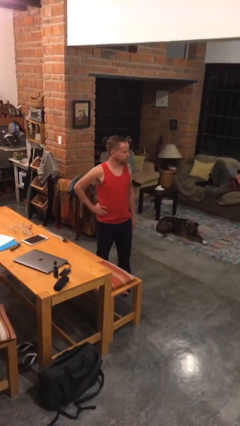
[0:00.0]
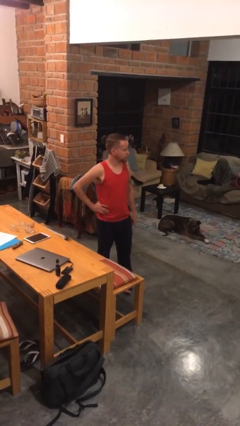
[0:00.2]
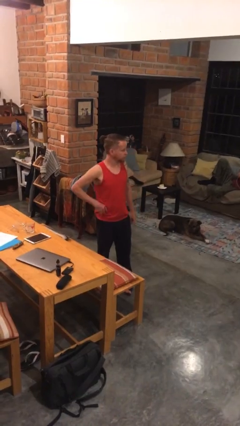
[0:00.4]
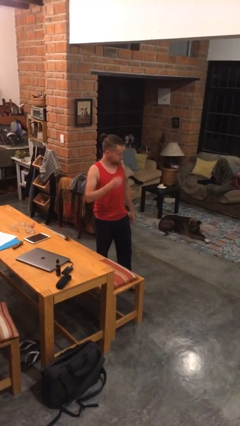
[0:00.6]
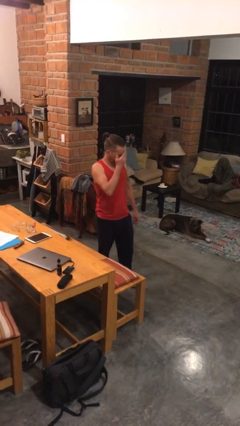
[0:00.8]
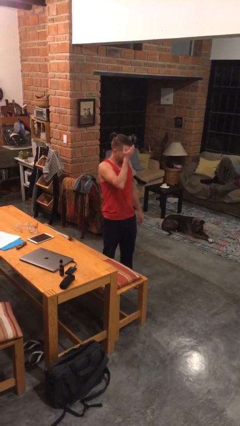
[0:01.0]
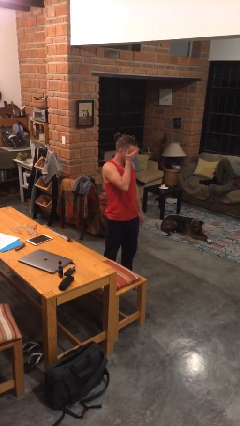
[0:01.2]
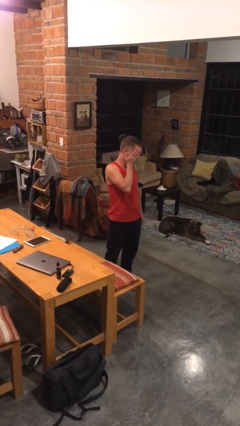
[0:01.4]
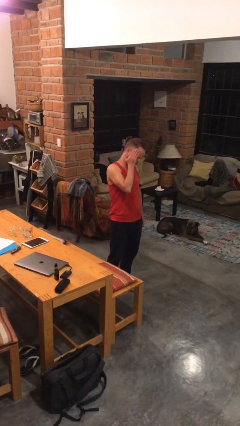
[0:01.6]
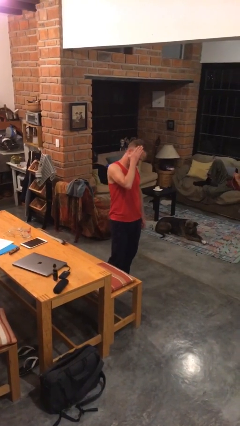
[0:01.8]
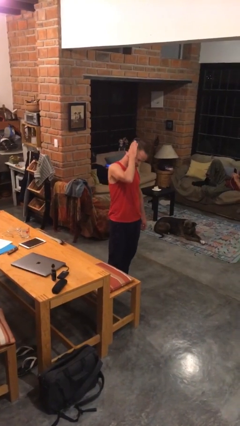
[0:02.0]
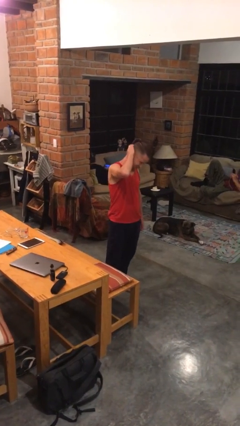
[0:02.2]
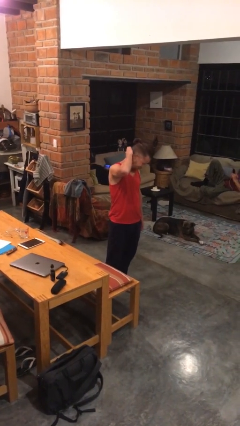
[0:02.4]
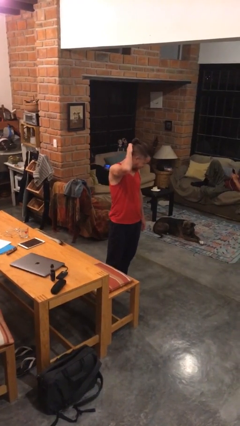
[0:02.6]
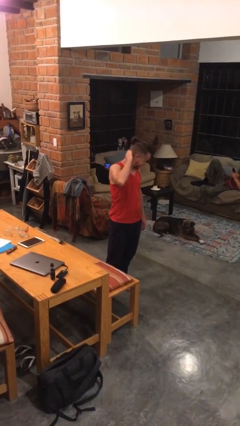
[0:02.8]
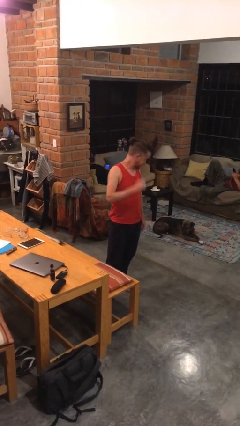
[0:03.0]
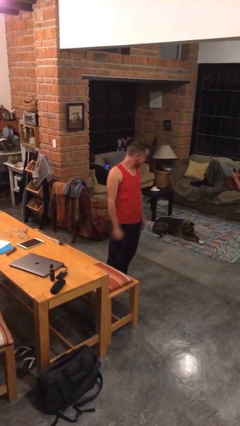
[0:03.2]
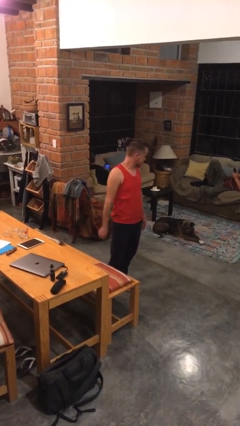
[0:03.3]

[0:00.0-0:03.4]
person scratches face

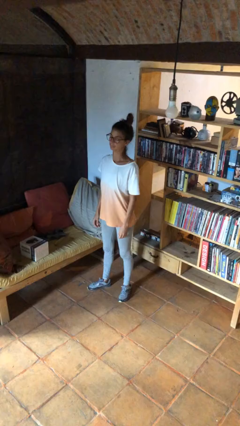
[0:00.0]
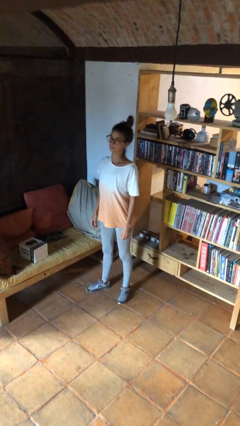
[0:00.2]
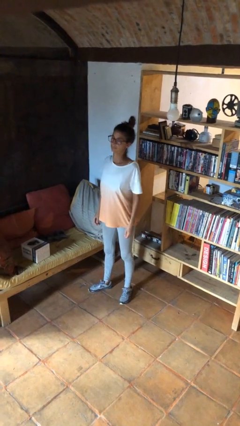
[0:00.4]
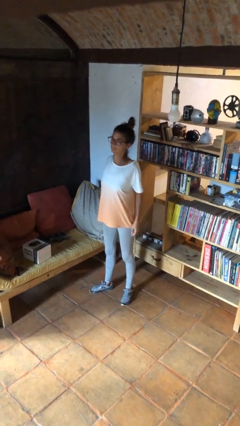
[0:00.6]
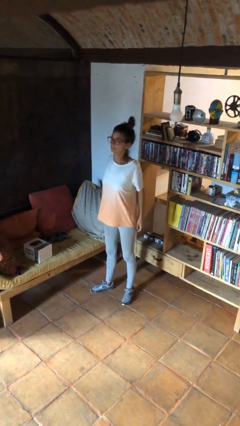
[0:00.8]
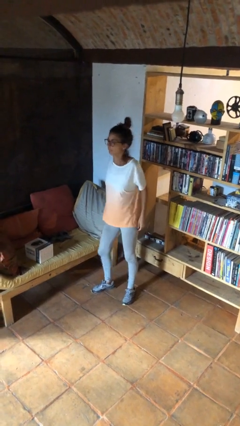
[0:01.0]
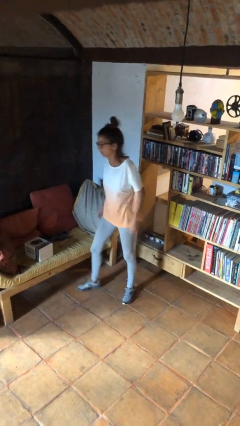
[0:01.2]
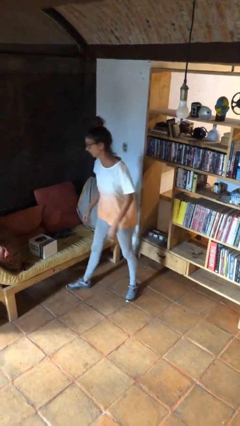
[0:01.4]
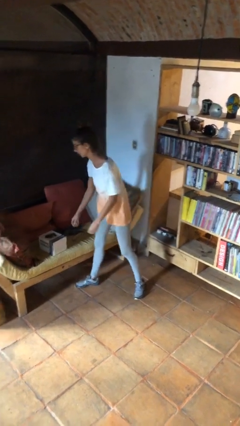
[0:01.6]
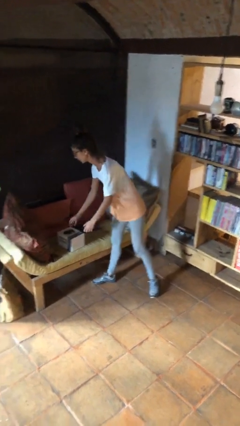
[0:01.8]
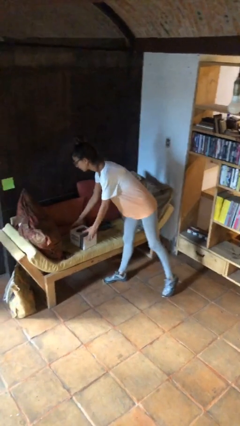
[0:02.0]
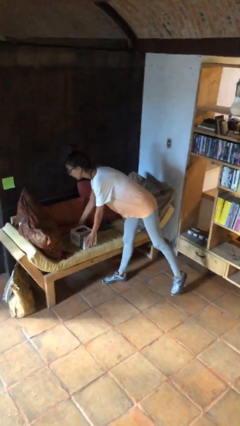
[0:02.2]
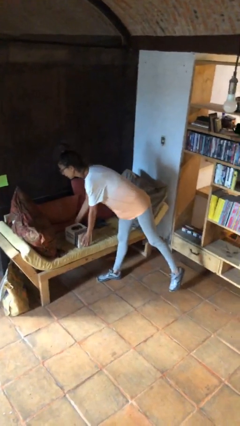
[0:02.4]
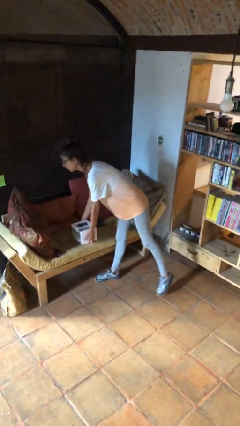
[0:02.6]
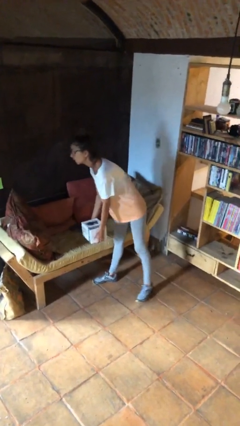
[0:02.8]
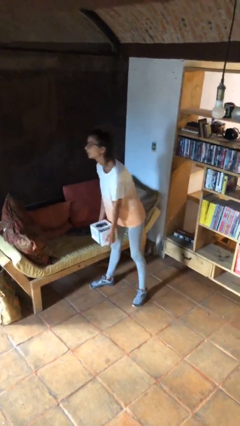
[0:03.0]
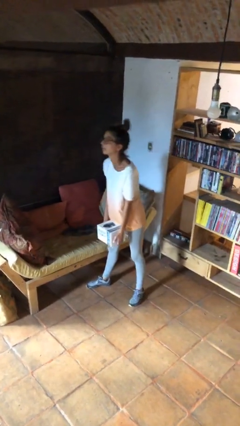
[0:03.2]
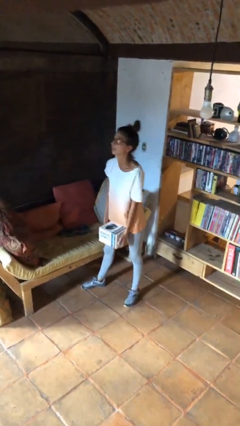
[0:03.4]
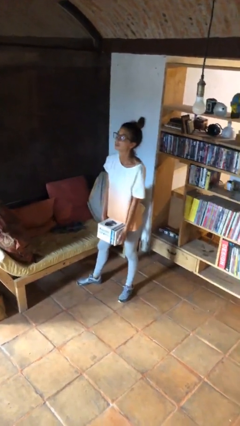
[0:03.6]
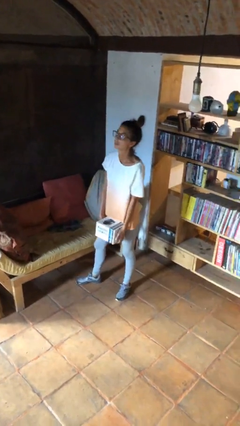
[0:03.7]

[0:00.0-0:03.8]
person picks up object from couch

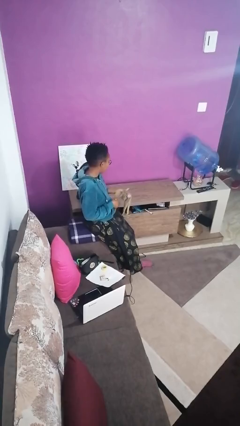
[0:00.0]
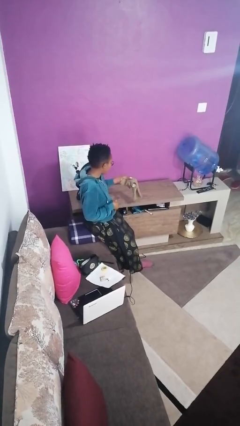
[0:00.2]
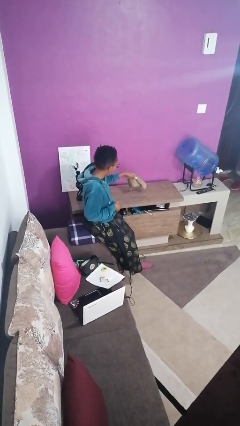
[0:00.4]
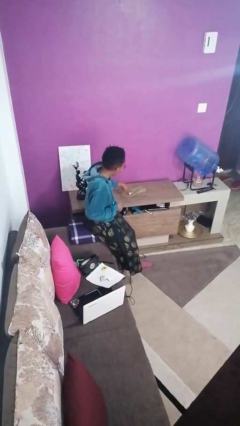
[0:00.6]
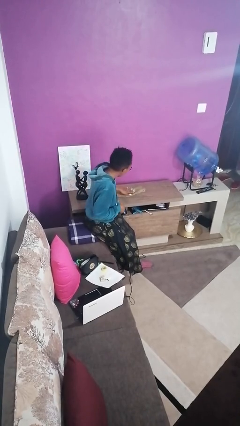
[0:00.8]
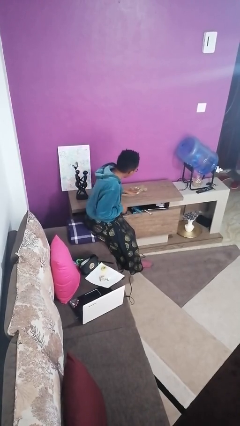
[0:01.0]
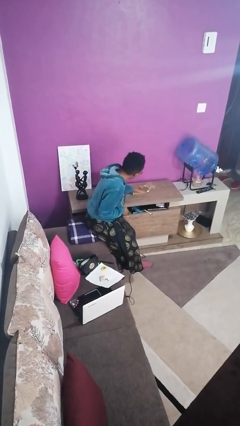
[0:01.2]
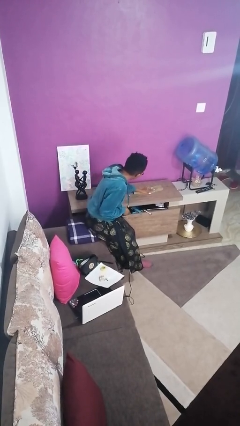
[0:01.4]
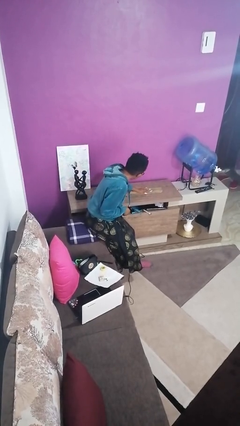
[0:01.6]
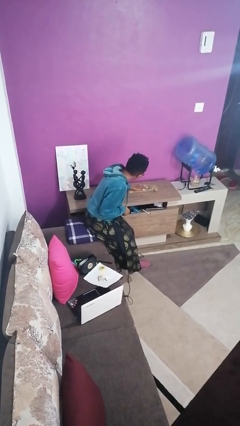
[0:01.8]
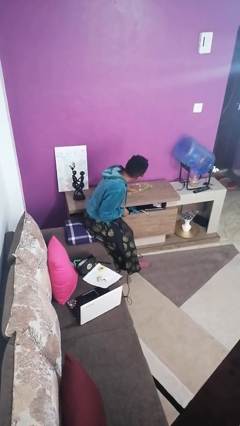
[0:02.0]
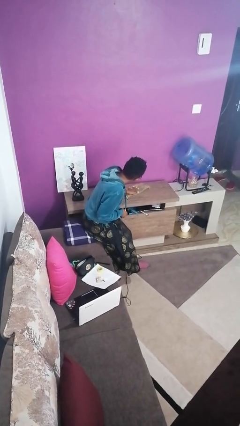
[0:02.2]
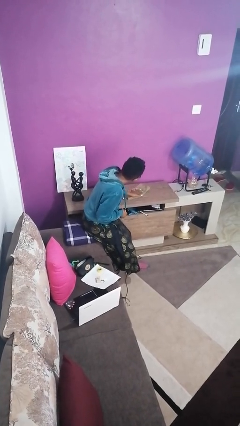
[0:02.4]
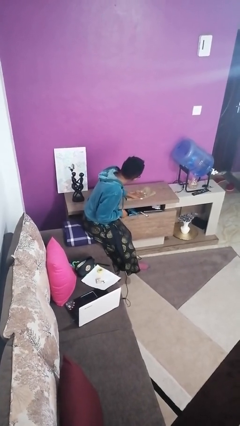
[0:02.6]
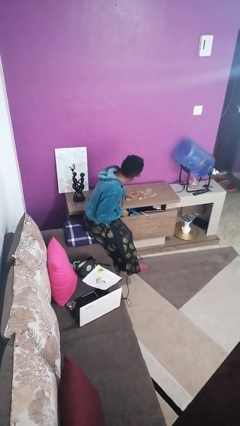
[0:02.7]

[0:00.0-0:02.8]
person cleans table with rag

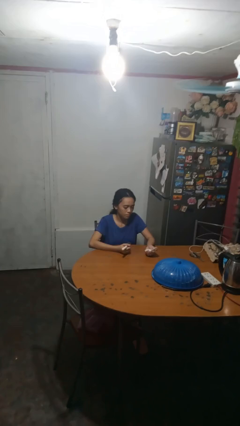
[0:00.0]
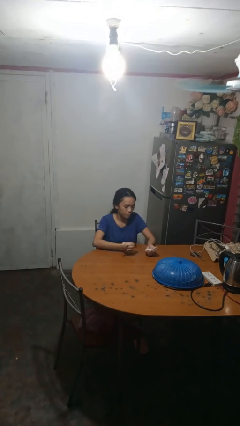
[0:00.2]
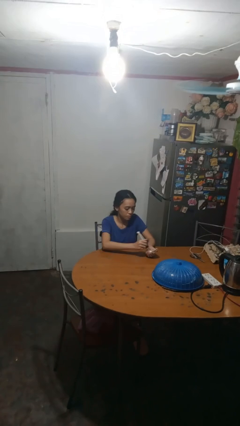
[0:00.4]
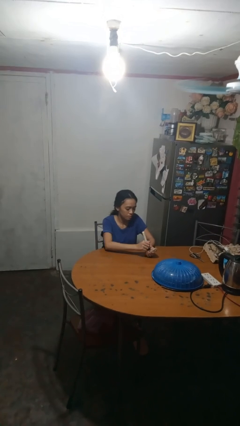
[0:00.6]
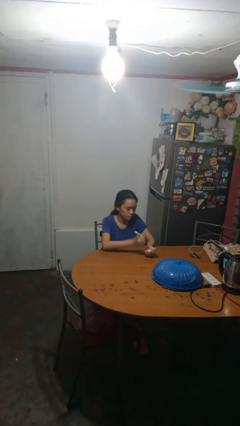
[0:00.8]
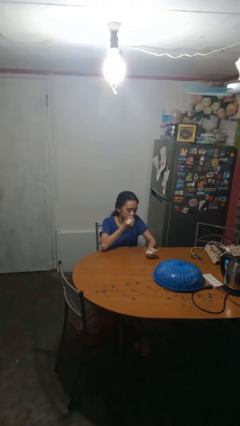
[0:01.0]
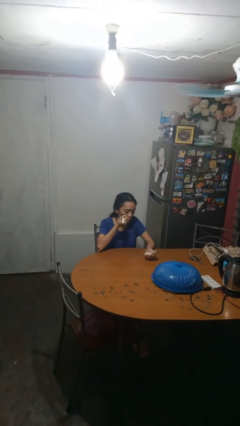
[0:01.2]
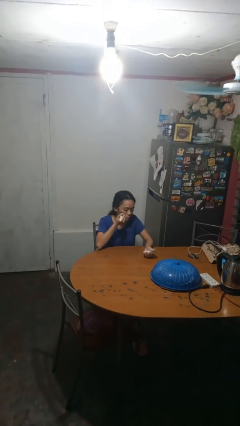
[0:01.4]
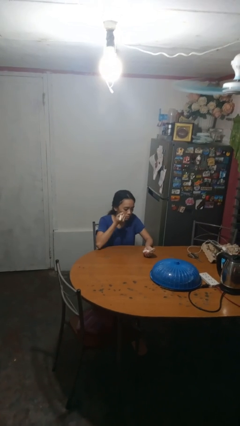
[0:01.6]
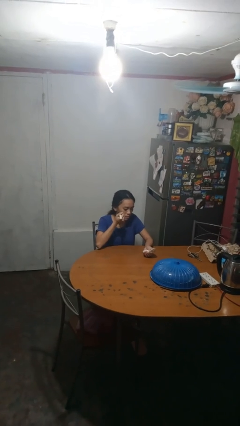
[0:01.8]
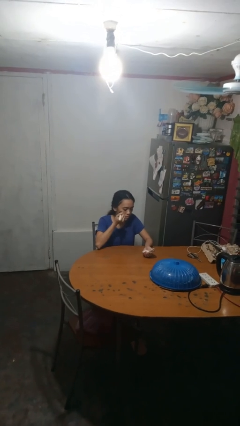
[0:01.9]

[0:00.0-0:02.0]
person applies foundation makeup

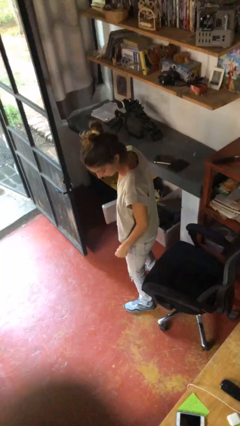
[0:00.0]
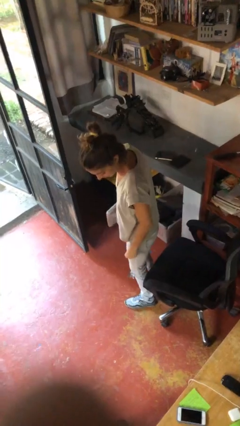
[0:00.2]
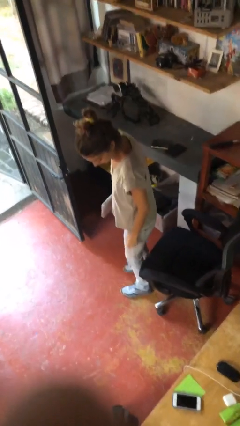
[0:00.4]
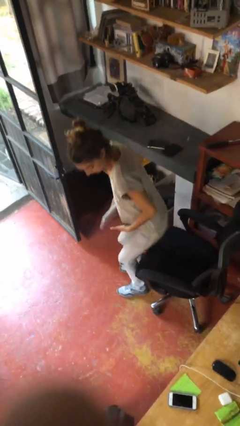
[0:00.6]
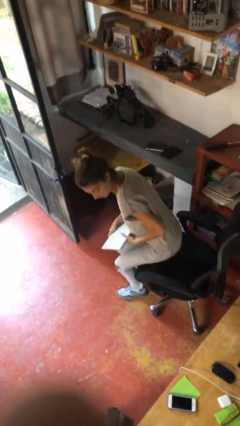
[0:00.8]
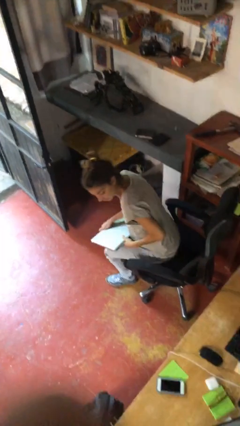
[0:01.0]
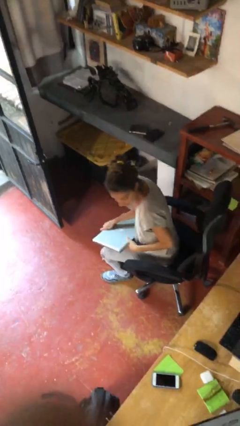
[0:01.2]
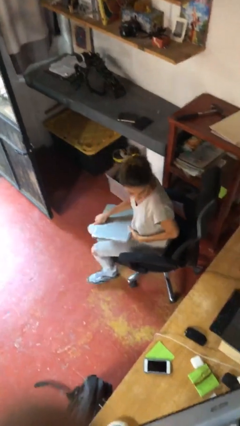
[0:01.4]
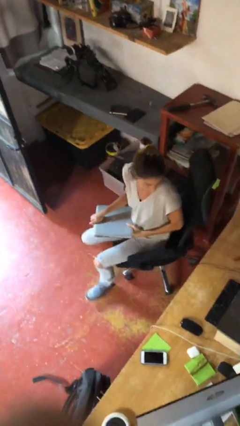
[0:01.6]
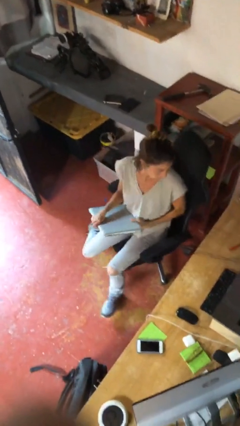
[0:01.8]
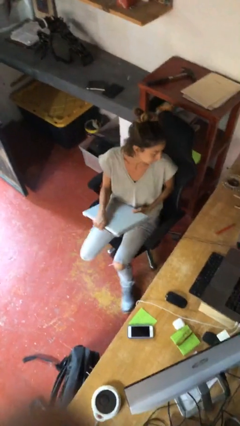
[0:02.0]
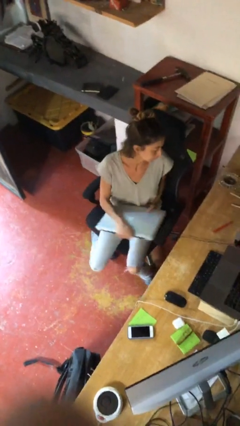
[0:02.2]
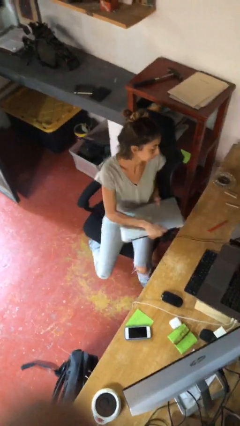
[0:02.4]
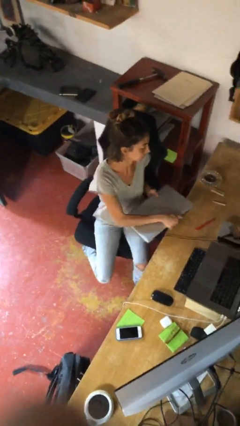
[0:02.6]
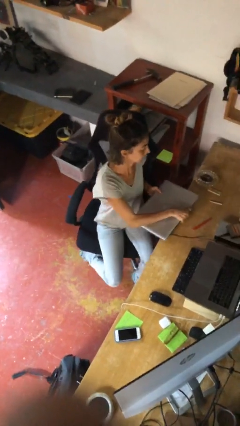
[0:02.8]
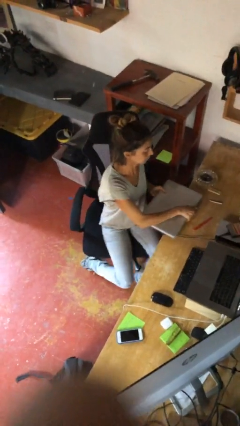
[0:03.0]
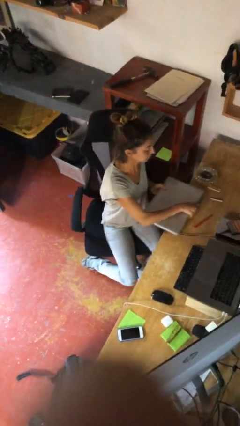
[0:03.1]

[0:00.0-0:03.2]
person sits down

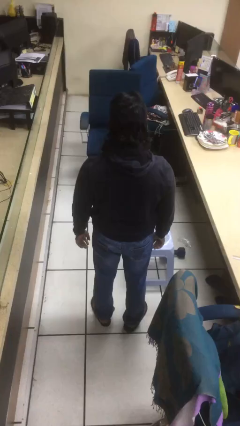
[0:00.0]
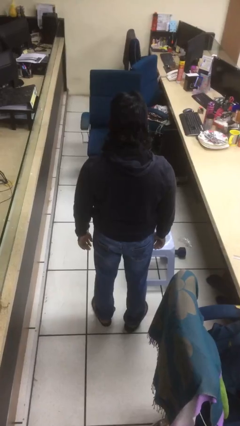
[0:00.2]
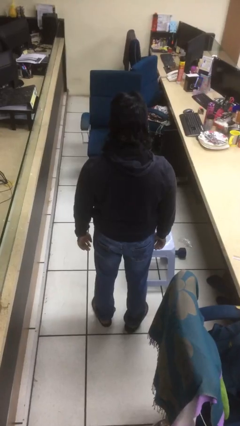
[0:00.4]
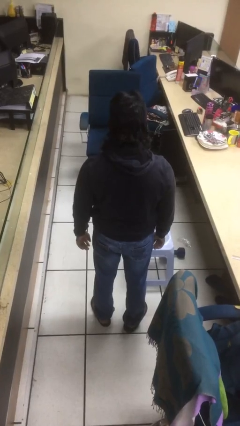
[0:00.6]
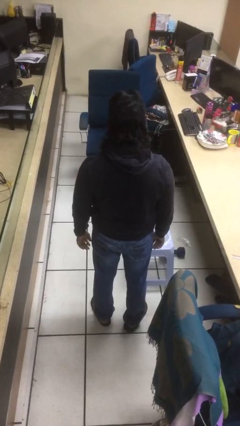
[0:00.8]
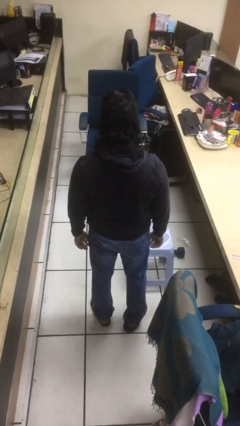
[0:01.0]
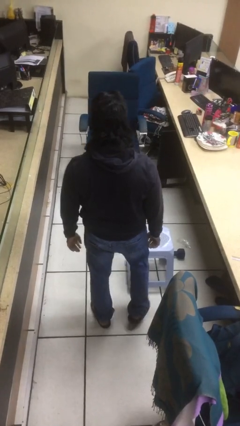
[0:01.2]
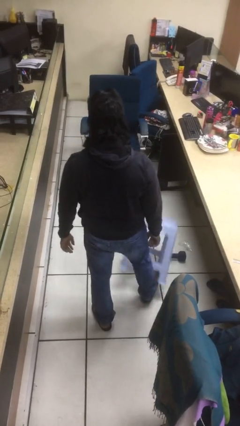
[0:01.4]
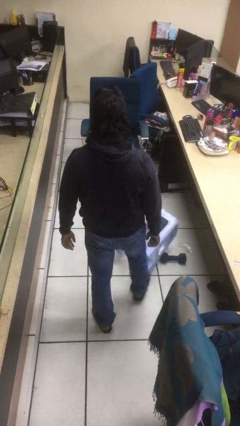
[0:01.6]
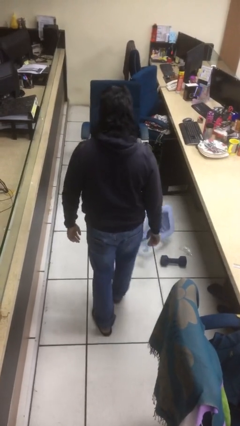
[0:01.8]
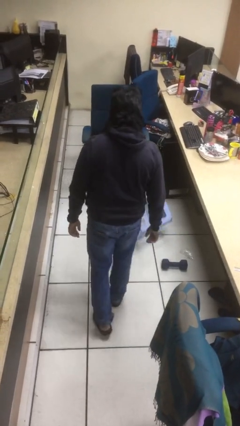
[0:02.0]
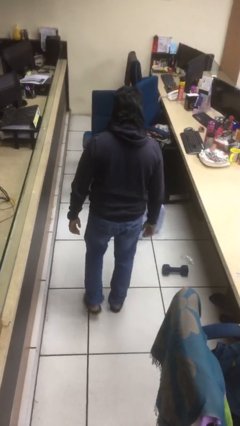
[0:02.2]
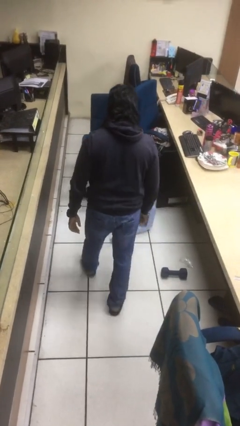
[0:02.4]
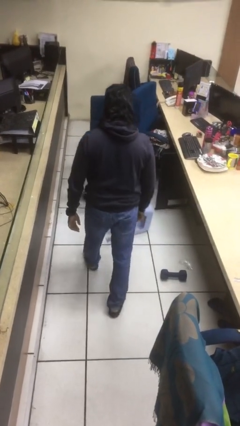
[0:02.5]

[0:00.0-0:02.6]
person knocks over furniture
